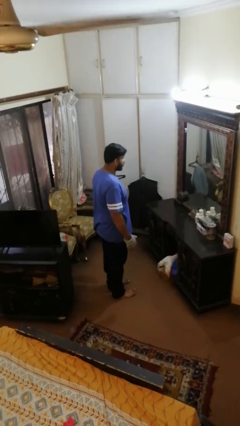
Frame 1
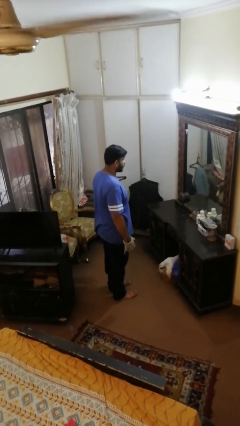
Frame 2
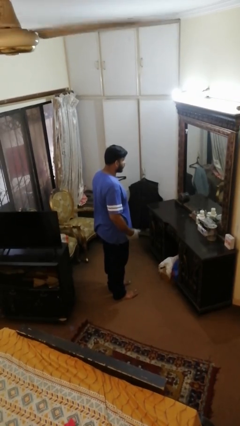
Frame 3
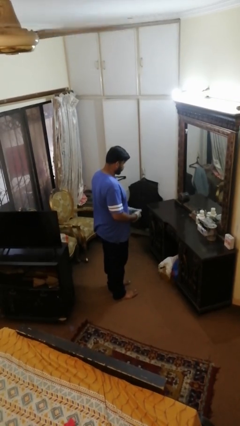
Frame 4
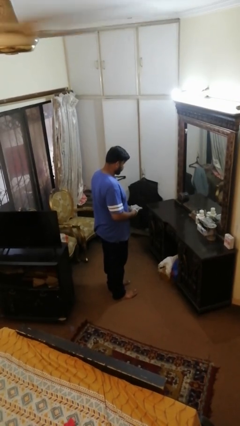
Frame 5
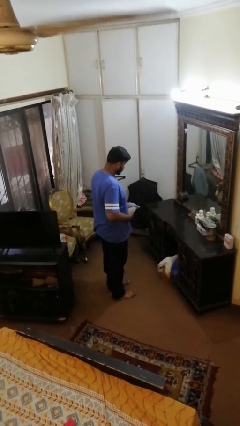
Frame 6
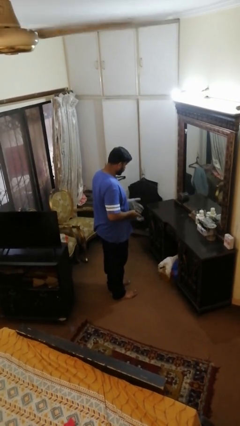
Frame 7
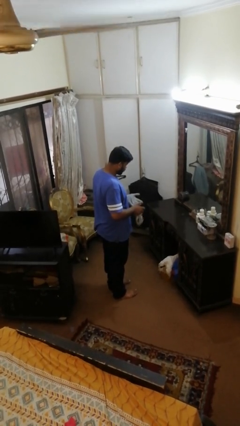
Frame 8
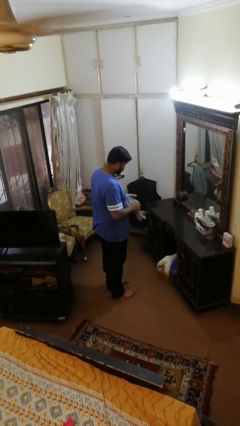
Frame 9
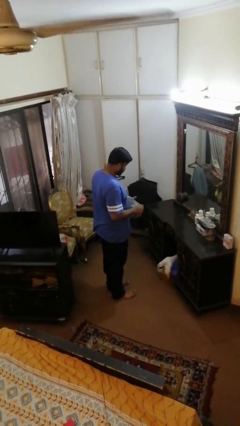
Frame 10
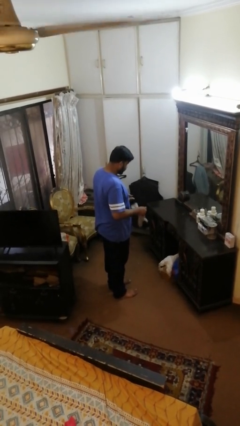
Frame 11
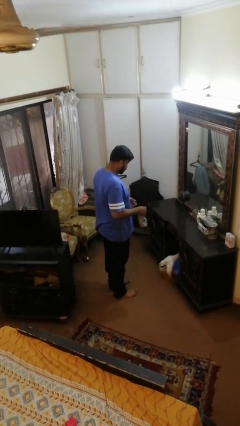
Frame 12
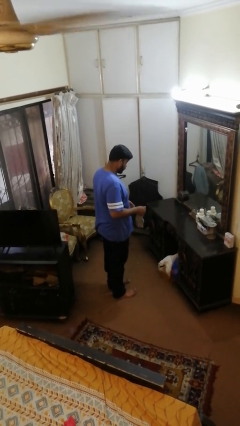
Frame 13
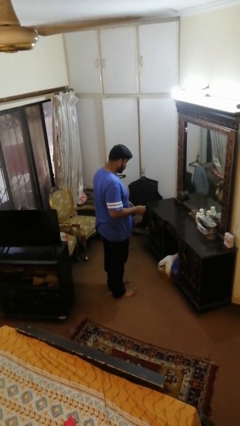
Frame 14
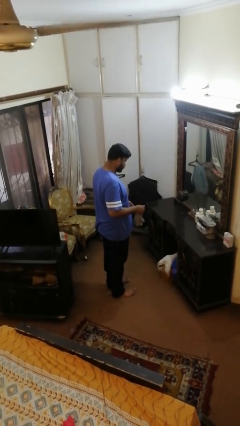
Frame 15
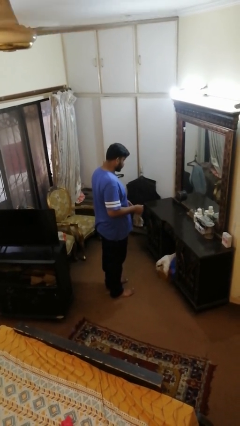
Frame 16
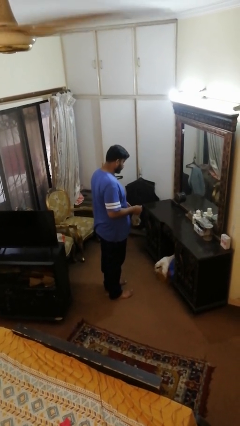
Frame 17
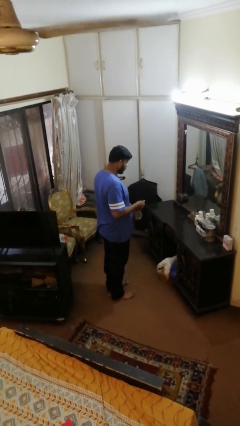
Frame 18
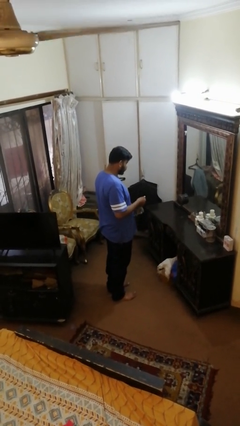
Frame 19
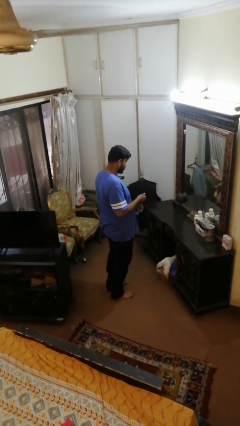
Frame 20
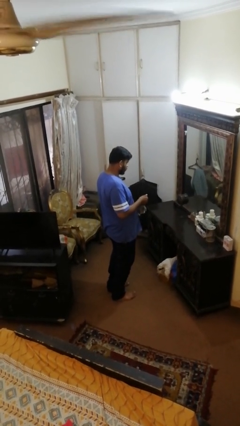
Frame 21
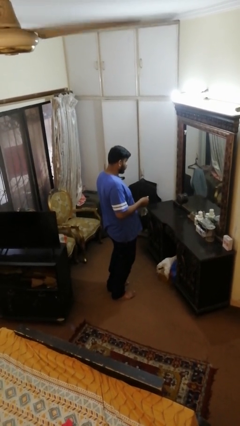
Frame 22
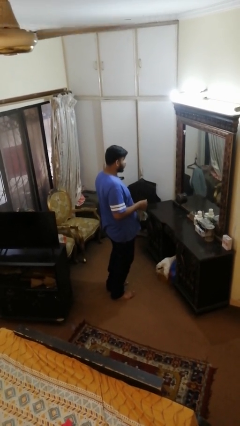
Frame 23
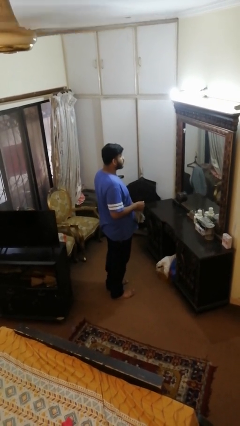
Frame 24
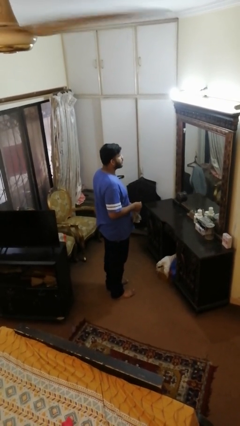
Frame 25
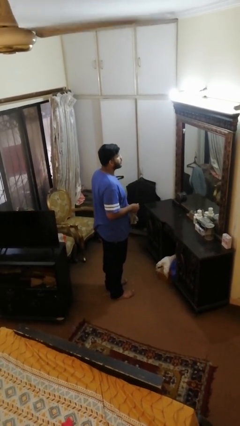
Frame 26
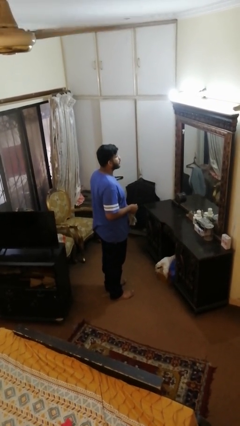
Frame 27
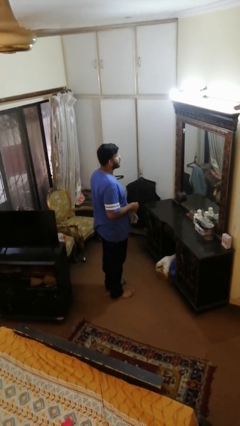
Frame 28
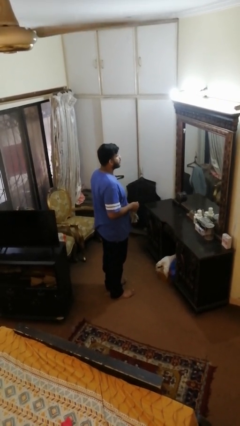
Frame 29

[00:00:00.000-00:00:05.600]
person takes off gloves

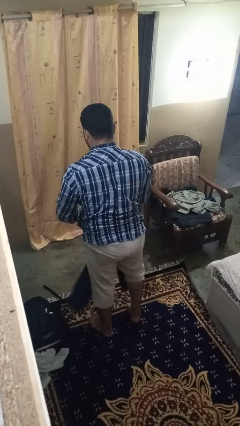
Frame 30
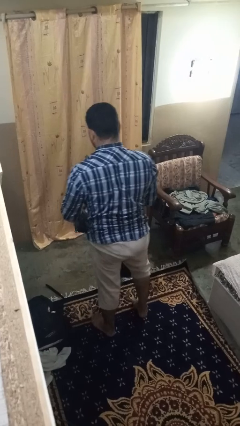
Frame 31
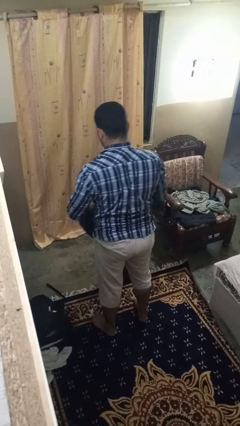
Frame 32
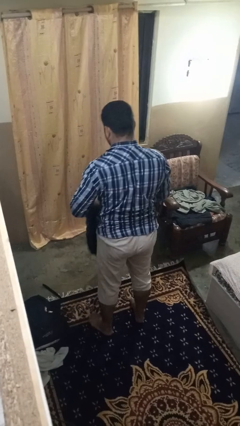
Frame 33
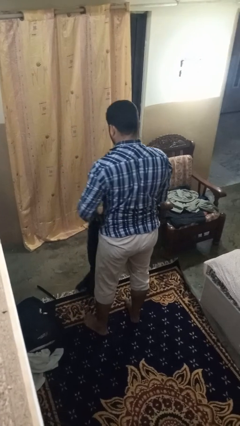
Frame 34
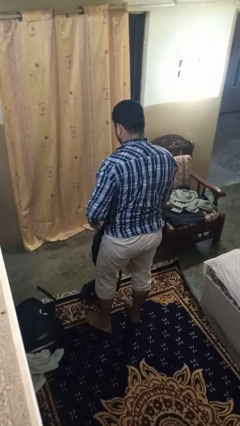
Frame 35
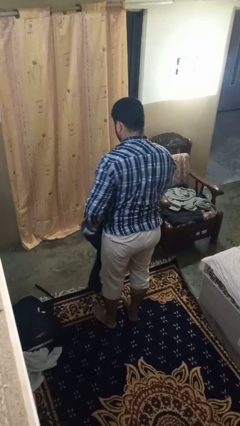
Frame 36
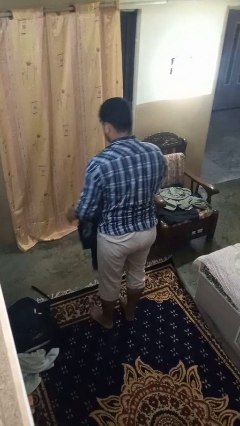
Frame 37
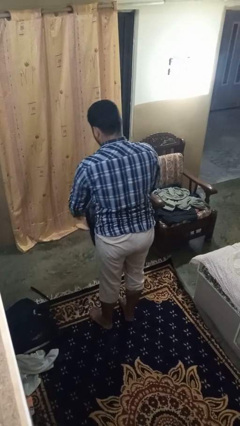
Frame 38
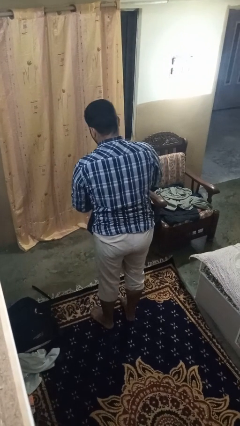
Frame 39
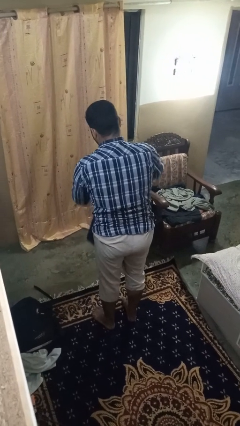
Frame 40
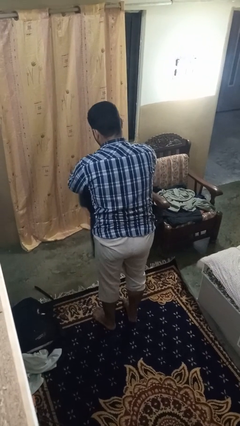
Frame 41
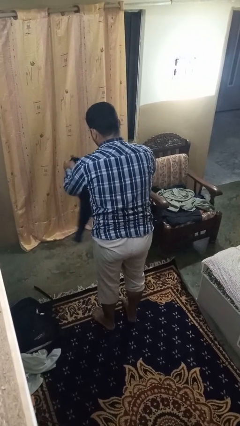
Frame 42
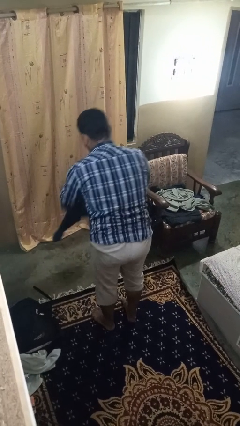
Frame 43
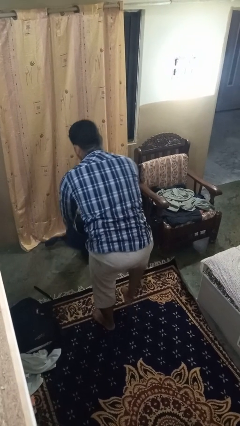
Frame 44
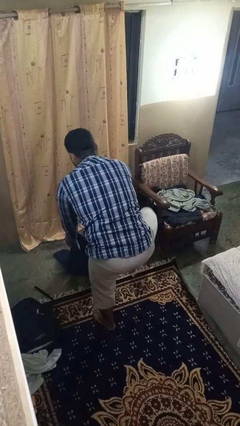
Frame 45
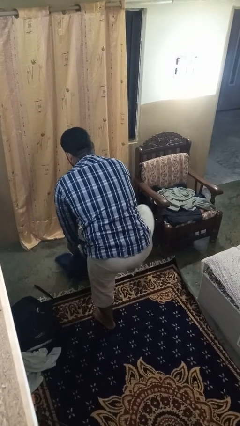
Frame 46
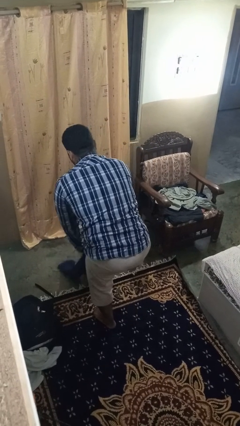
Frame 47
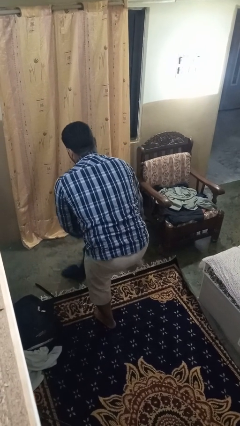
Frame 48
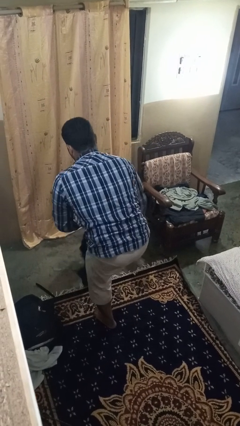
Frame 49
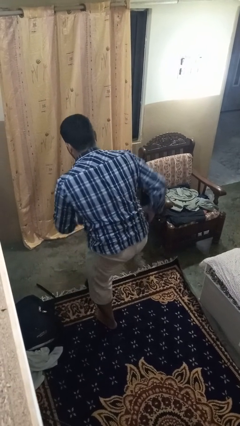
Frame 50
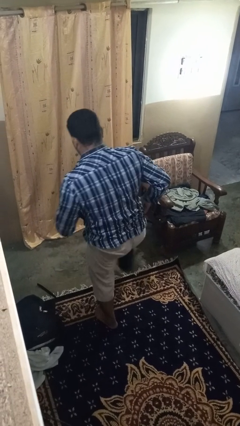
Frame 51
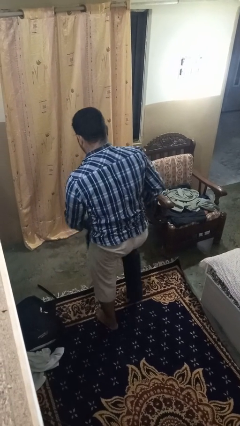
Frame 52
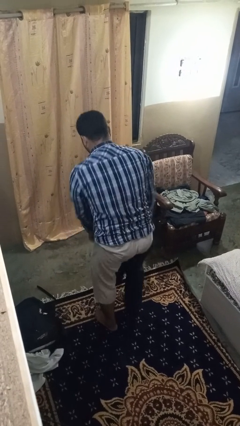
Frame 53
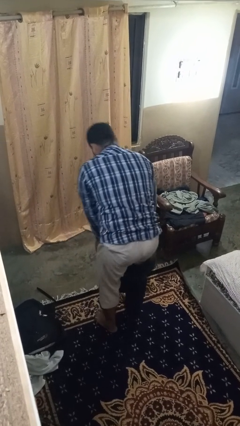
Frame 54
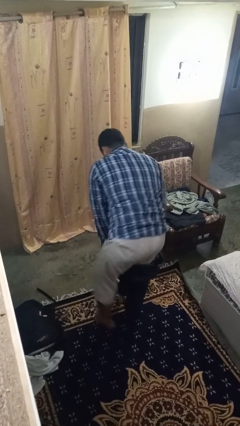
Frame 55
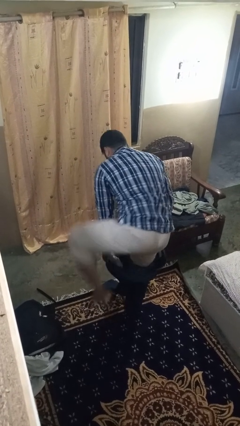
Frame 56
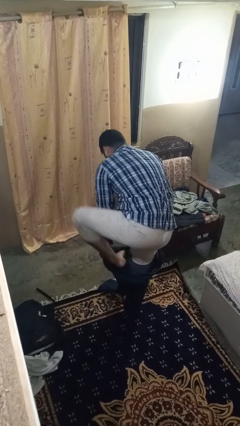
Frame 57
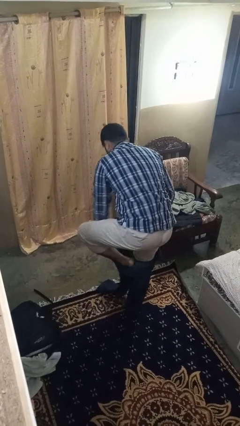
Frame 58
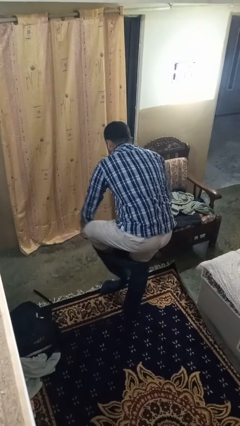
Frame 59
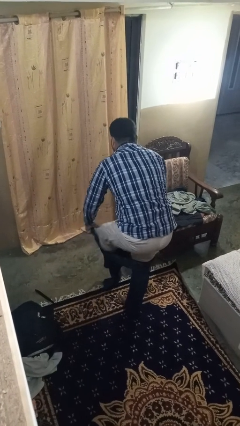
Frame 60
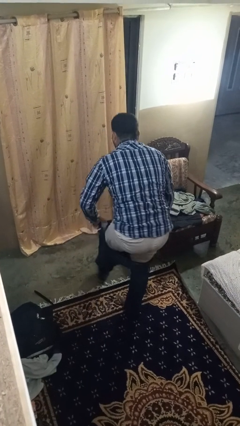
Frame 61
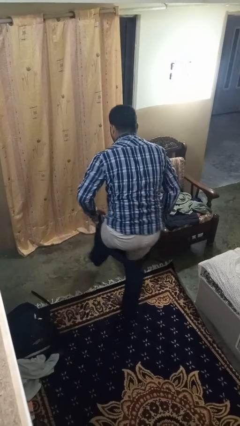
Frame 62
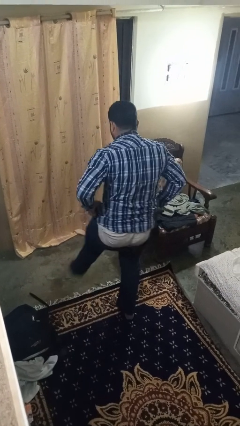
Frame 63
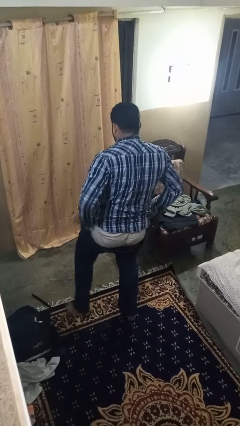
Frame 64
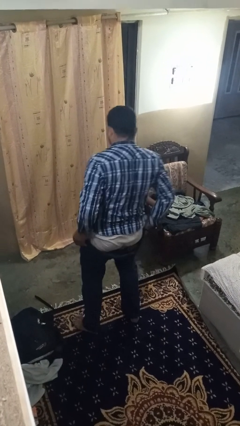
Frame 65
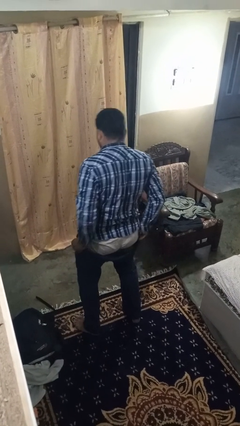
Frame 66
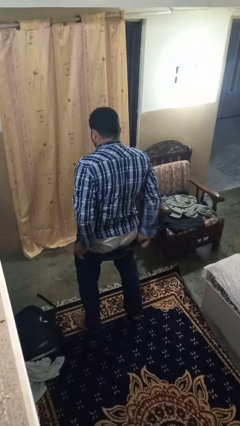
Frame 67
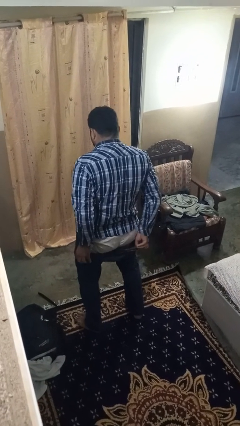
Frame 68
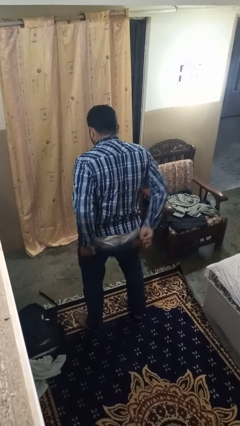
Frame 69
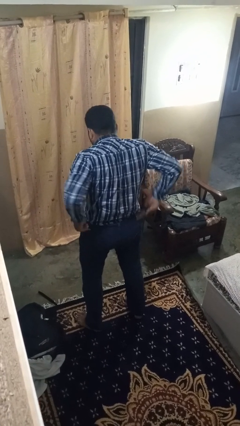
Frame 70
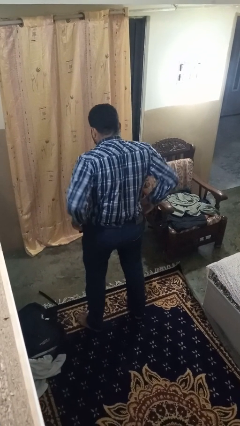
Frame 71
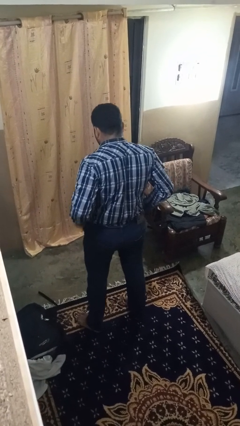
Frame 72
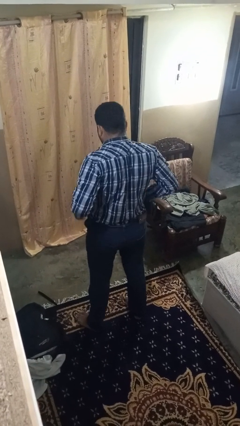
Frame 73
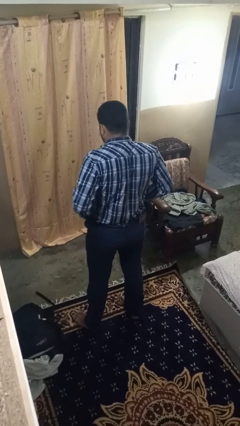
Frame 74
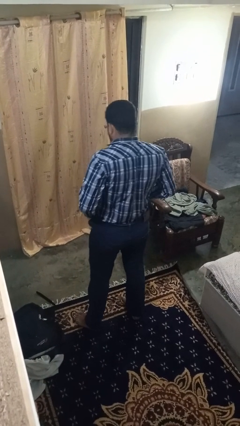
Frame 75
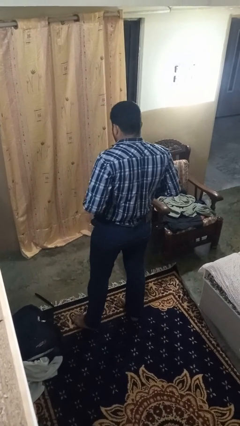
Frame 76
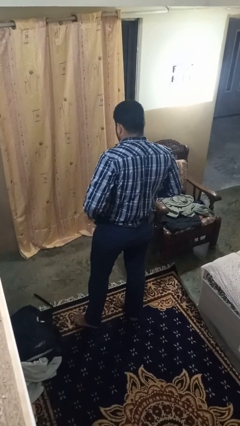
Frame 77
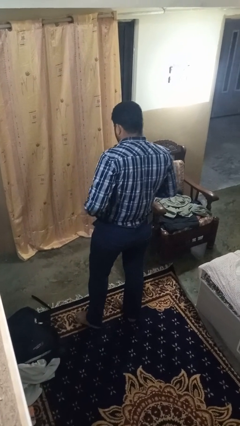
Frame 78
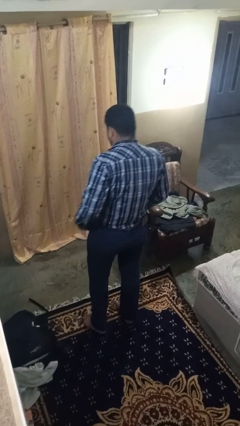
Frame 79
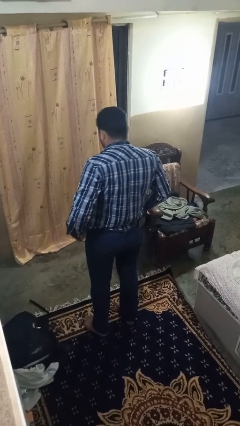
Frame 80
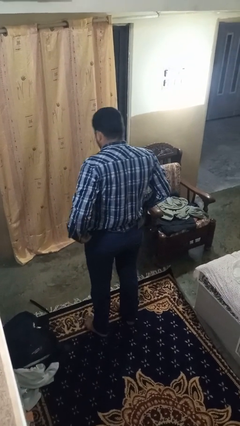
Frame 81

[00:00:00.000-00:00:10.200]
person puts on pants

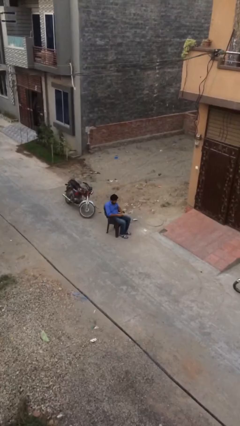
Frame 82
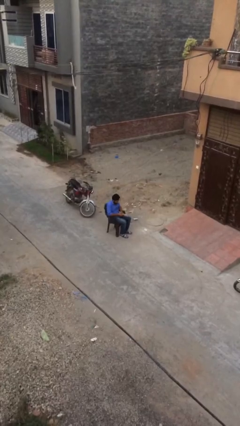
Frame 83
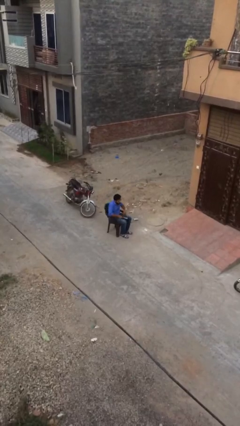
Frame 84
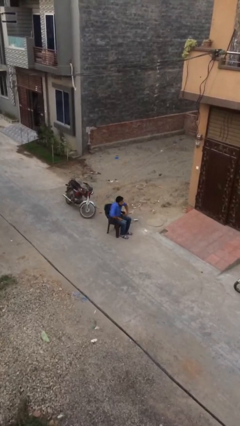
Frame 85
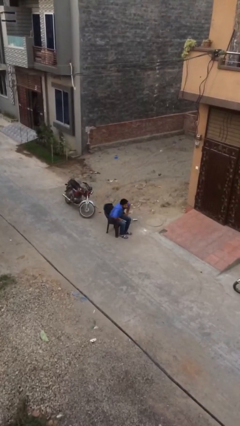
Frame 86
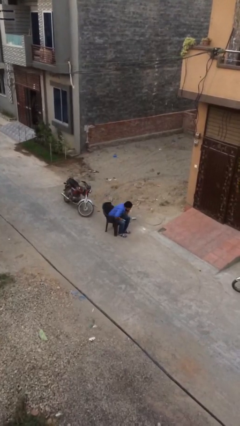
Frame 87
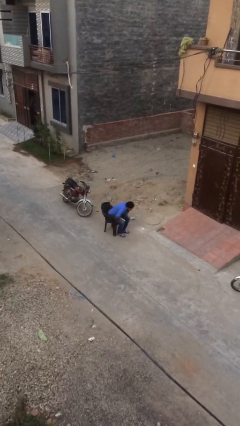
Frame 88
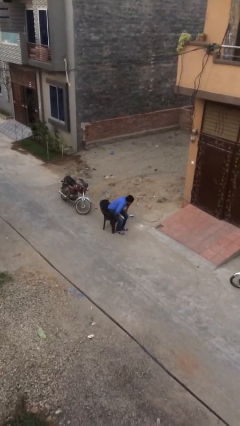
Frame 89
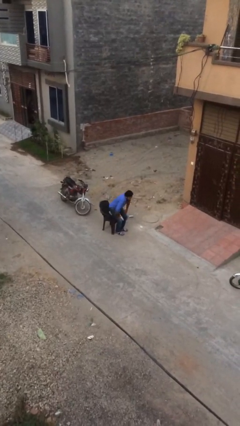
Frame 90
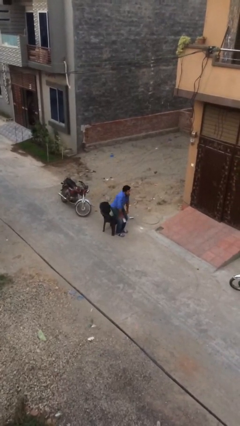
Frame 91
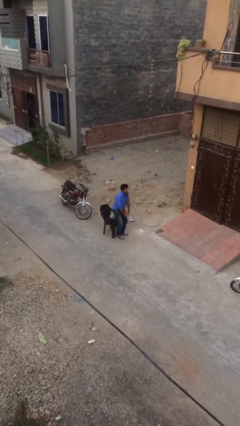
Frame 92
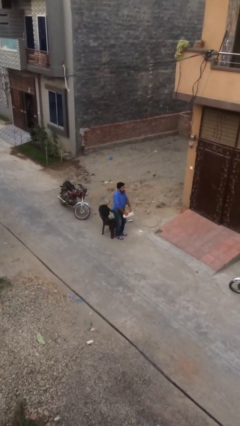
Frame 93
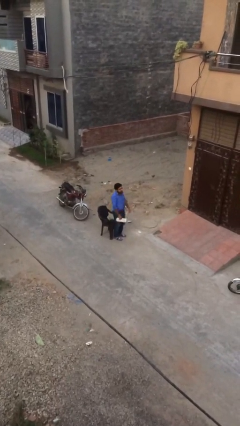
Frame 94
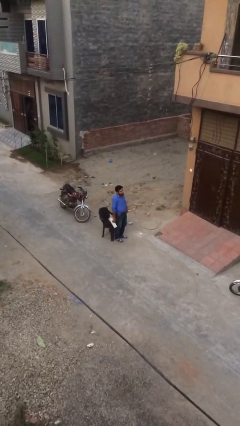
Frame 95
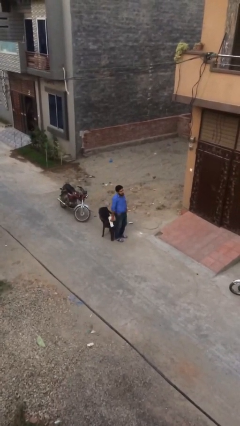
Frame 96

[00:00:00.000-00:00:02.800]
person stands up
